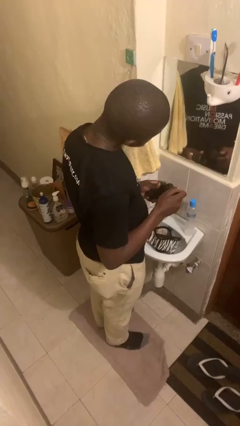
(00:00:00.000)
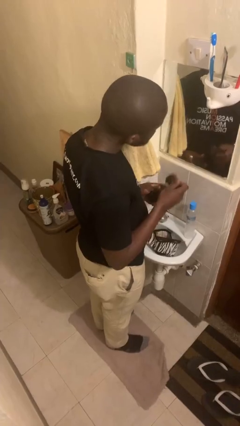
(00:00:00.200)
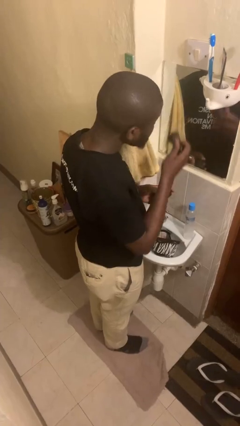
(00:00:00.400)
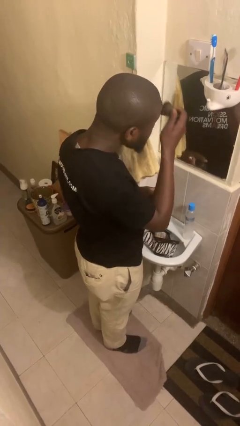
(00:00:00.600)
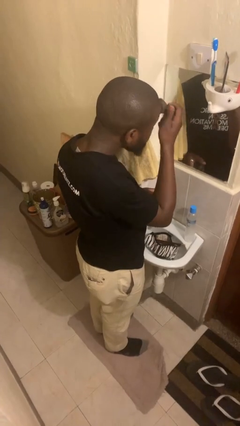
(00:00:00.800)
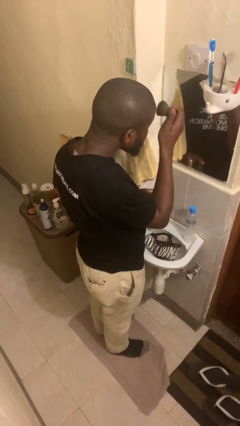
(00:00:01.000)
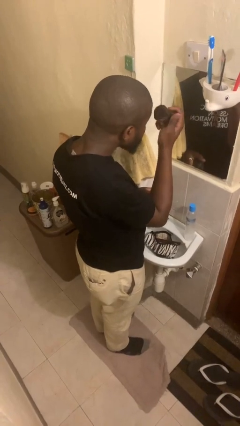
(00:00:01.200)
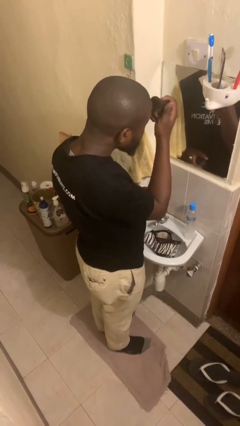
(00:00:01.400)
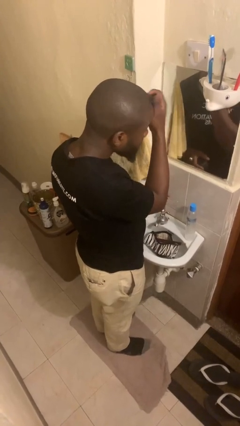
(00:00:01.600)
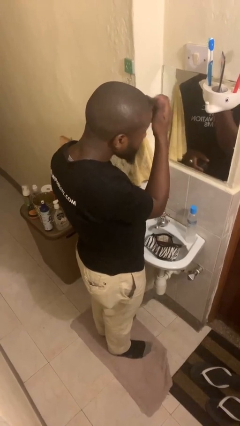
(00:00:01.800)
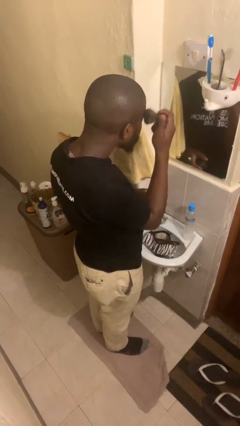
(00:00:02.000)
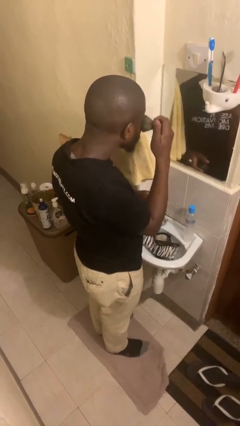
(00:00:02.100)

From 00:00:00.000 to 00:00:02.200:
person applies foundation makeup

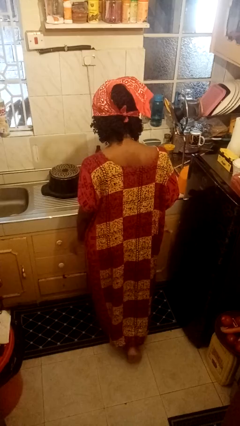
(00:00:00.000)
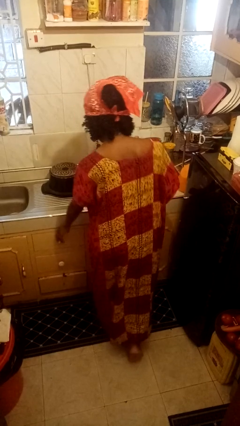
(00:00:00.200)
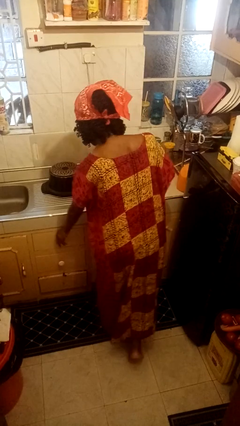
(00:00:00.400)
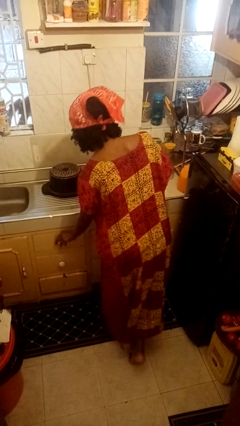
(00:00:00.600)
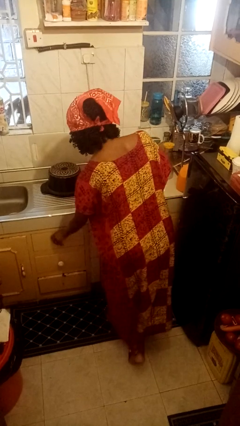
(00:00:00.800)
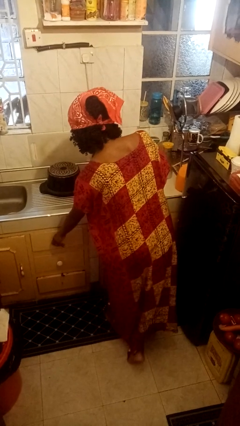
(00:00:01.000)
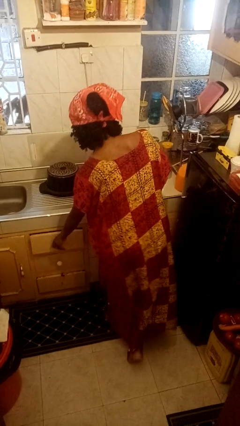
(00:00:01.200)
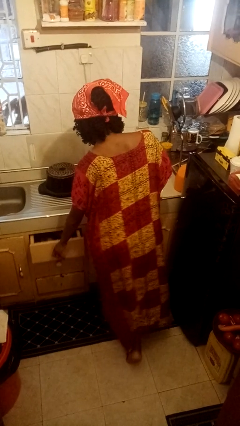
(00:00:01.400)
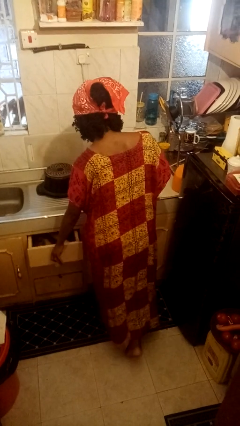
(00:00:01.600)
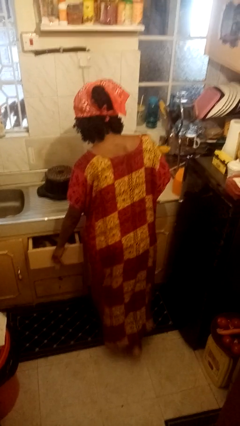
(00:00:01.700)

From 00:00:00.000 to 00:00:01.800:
person opens kitchen drawer

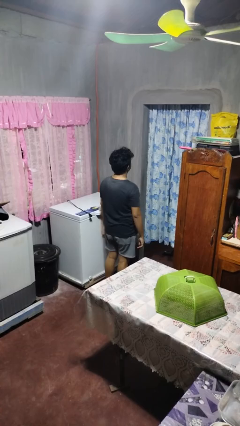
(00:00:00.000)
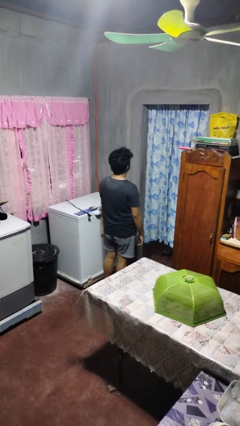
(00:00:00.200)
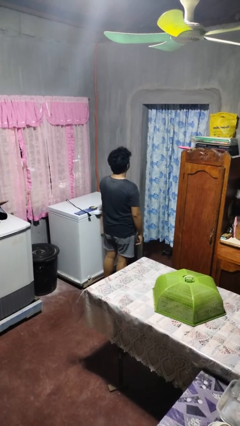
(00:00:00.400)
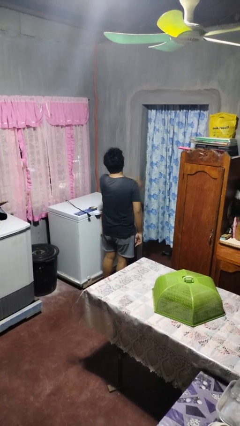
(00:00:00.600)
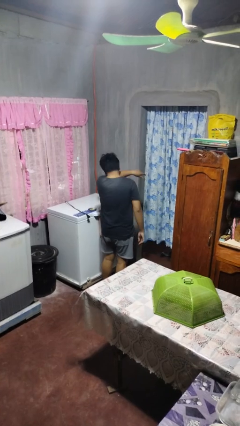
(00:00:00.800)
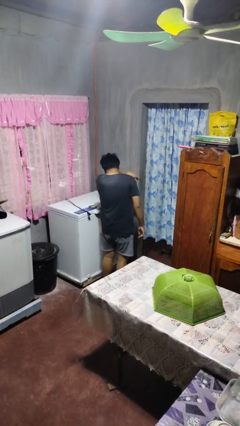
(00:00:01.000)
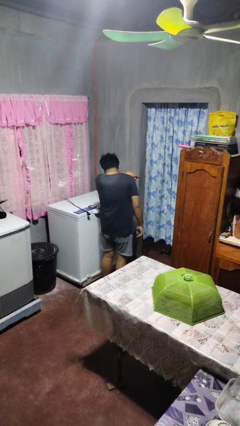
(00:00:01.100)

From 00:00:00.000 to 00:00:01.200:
person sneezes into arm

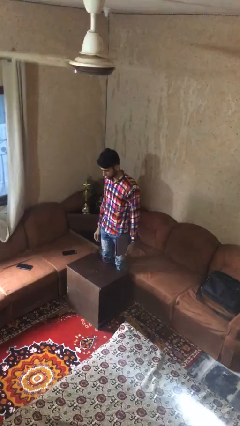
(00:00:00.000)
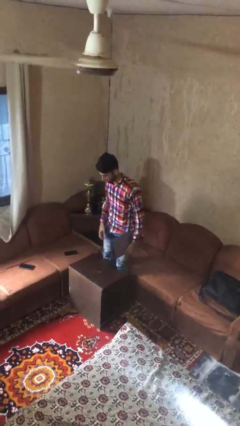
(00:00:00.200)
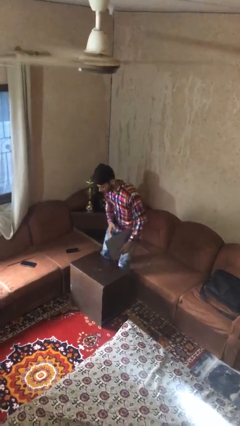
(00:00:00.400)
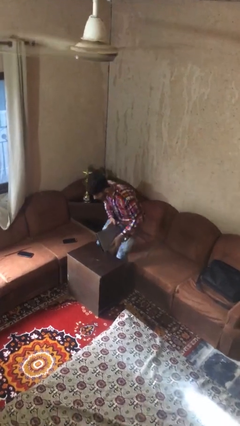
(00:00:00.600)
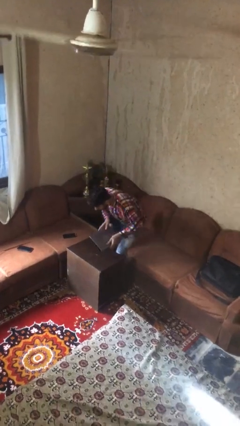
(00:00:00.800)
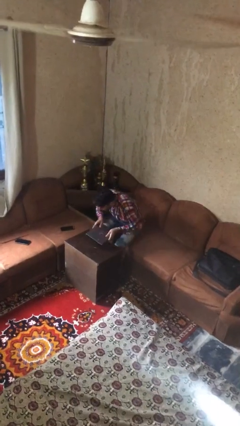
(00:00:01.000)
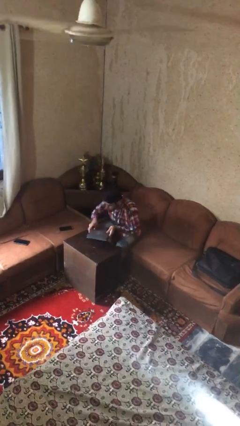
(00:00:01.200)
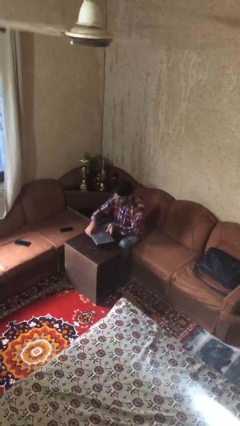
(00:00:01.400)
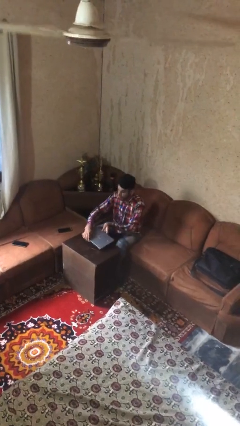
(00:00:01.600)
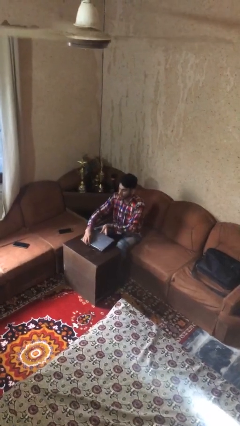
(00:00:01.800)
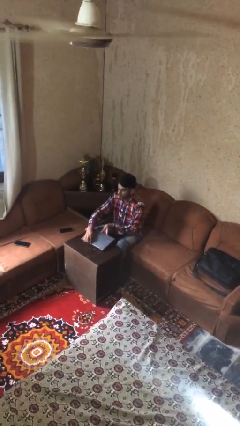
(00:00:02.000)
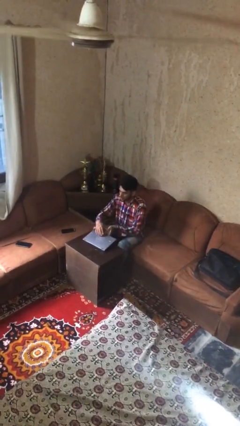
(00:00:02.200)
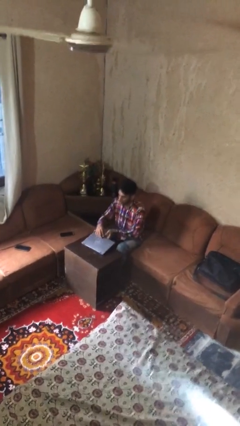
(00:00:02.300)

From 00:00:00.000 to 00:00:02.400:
person sits down

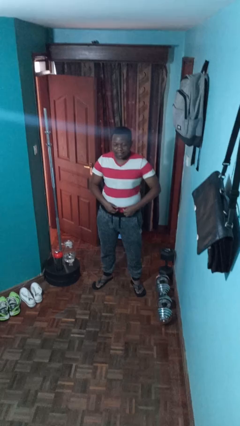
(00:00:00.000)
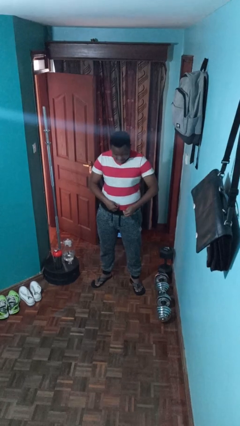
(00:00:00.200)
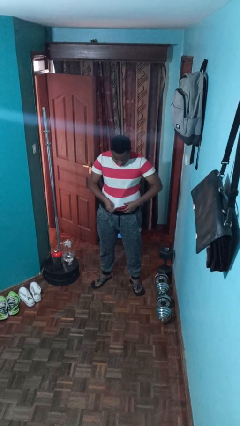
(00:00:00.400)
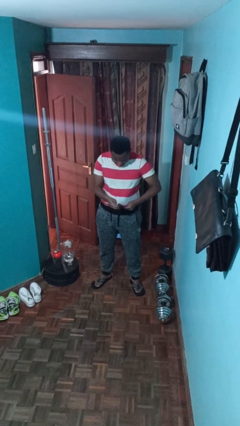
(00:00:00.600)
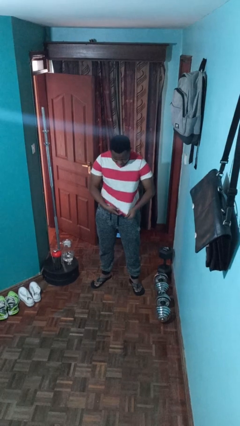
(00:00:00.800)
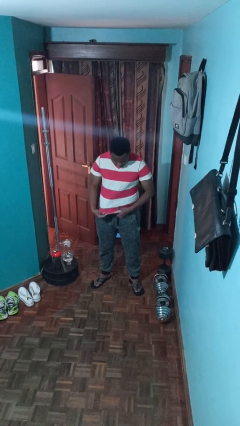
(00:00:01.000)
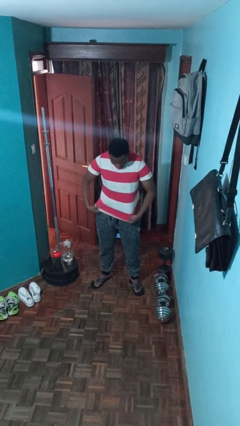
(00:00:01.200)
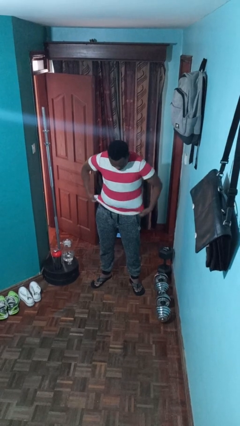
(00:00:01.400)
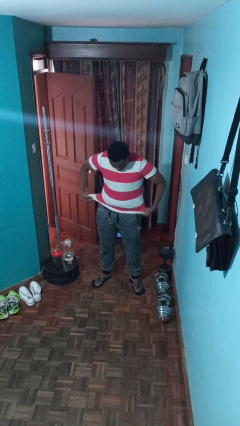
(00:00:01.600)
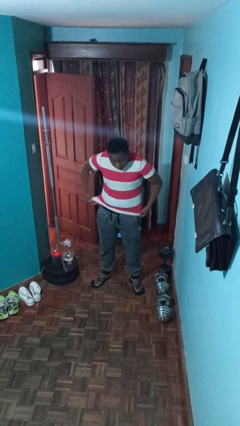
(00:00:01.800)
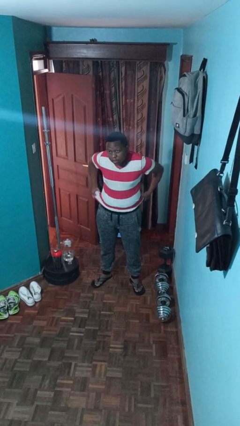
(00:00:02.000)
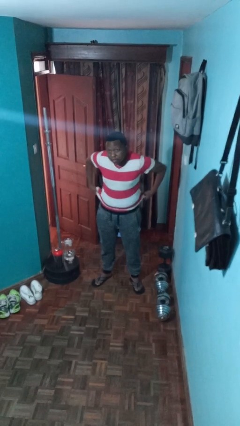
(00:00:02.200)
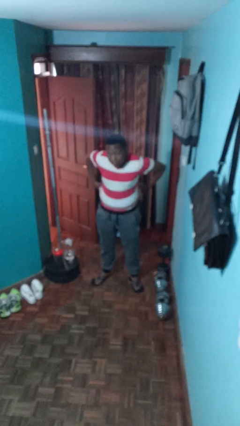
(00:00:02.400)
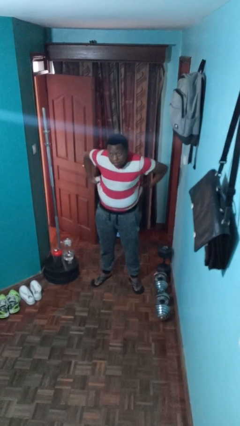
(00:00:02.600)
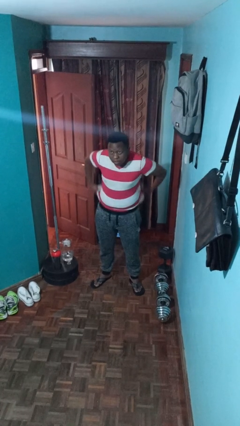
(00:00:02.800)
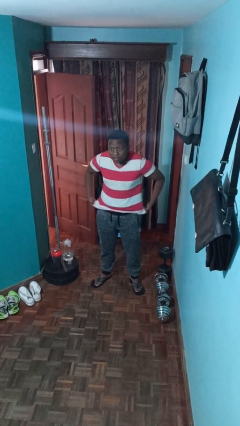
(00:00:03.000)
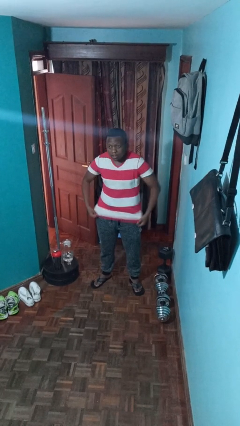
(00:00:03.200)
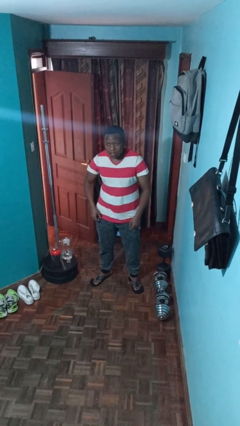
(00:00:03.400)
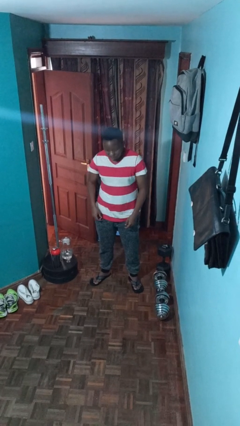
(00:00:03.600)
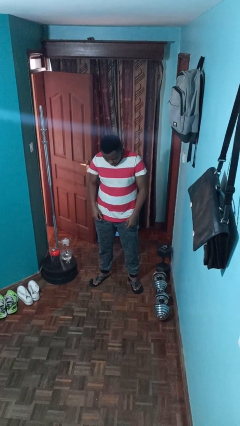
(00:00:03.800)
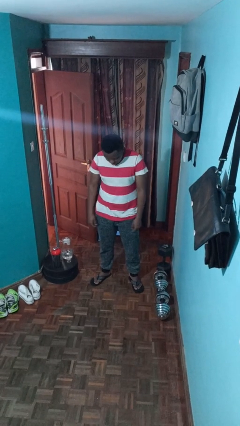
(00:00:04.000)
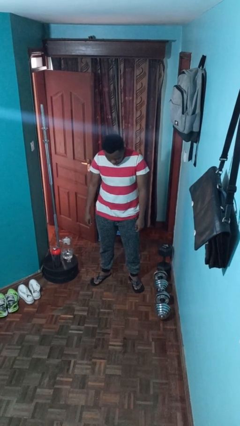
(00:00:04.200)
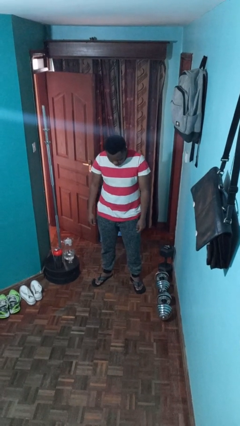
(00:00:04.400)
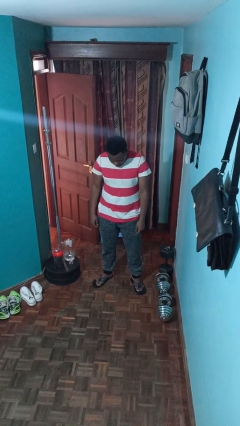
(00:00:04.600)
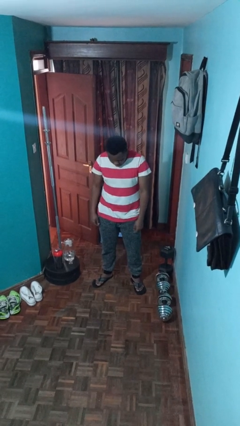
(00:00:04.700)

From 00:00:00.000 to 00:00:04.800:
person untucks shirt

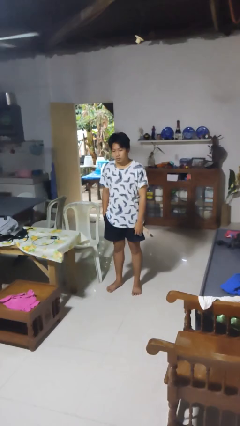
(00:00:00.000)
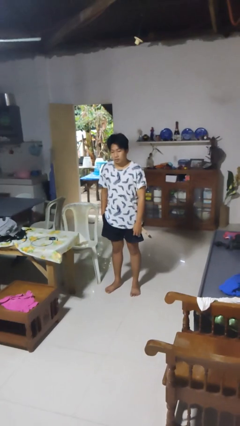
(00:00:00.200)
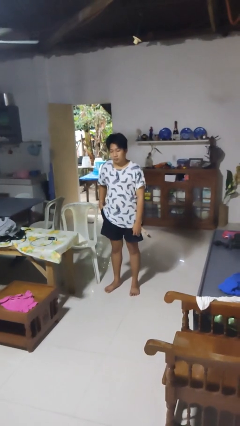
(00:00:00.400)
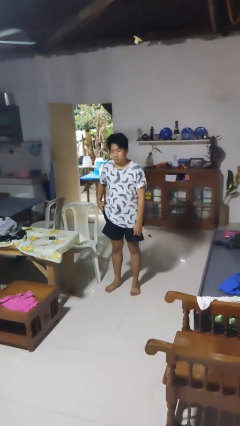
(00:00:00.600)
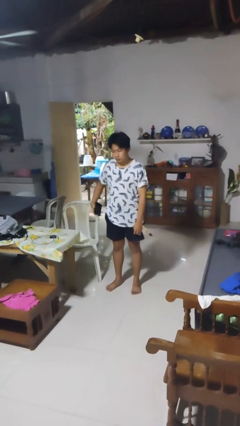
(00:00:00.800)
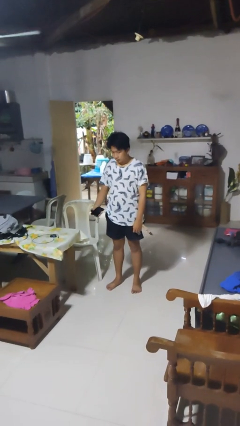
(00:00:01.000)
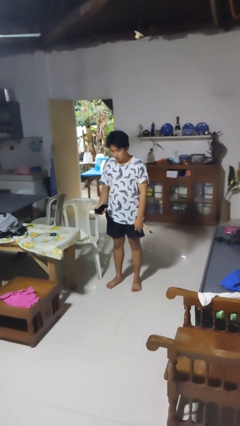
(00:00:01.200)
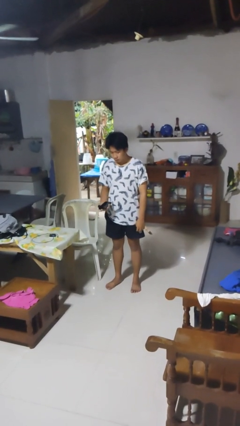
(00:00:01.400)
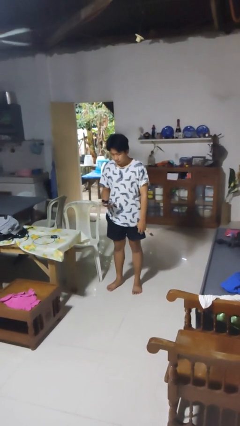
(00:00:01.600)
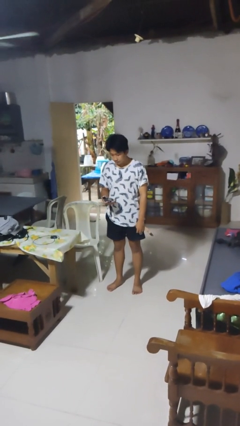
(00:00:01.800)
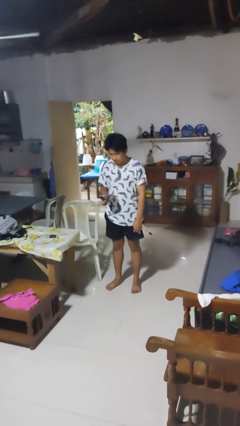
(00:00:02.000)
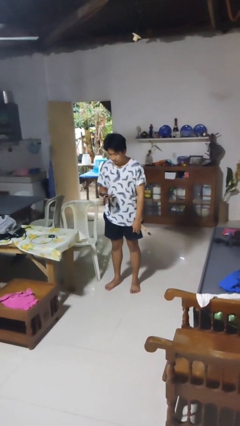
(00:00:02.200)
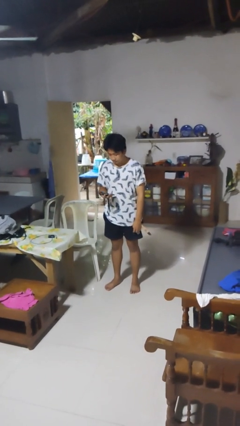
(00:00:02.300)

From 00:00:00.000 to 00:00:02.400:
person takes phone from pocket

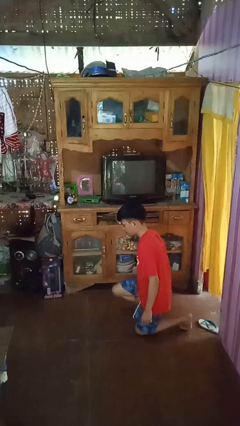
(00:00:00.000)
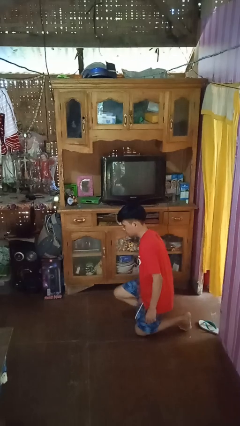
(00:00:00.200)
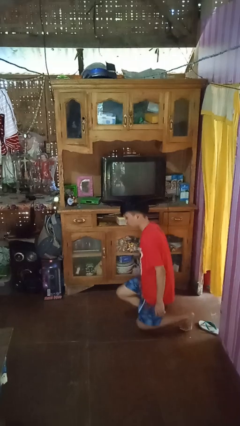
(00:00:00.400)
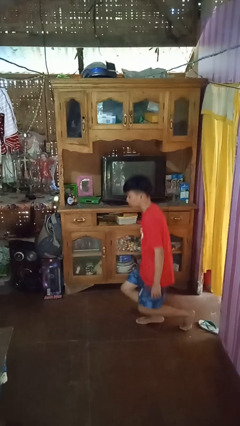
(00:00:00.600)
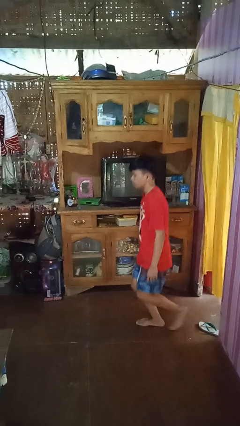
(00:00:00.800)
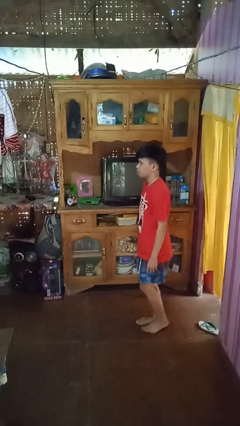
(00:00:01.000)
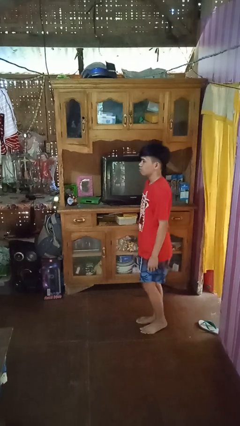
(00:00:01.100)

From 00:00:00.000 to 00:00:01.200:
person stands up from floor

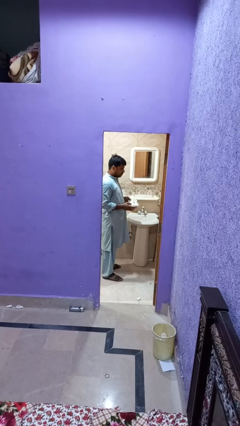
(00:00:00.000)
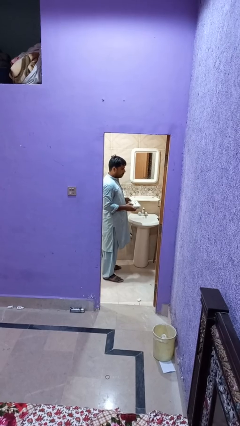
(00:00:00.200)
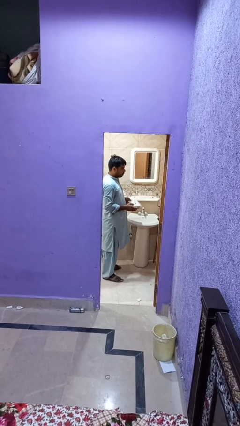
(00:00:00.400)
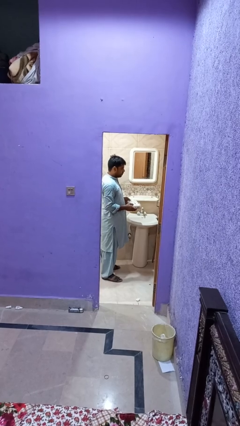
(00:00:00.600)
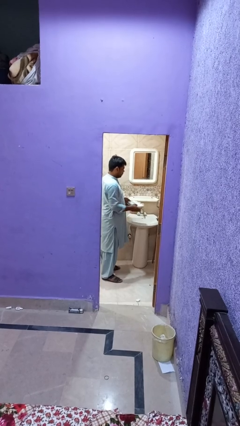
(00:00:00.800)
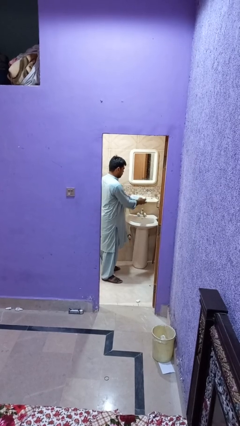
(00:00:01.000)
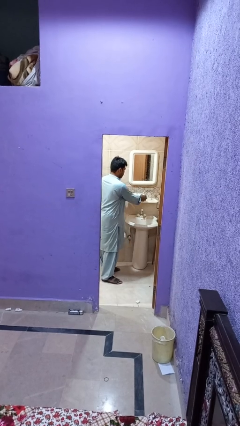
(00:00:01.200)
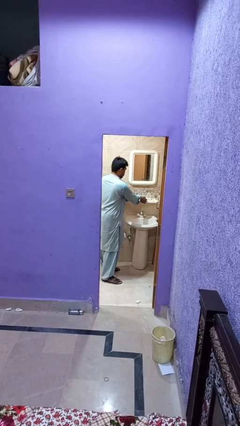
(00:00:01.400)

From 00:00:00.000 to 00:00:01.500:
person puts down object on countertop
